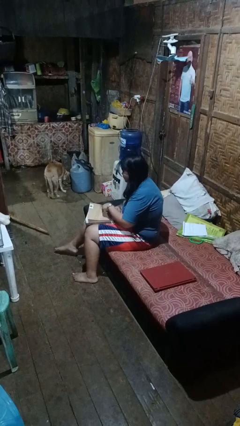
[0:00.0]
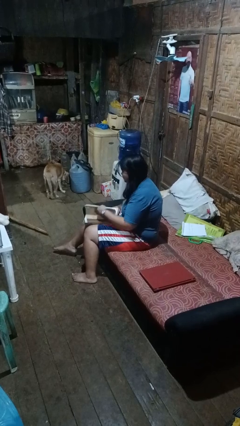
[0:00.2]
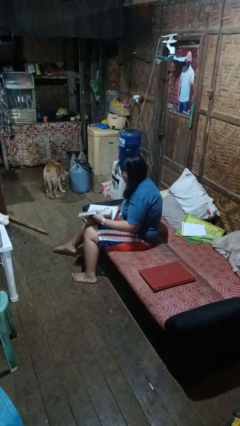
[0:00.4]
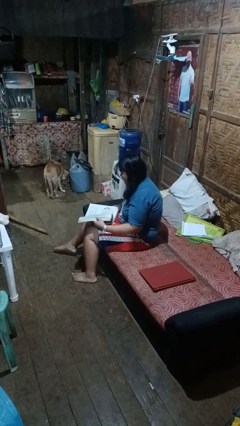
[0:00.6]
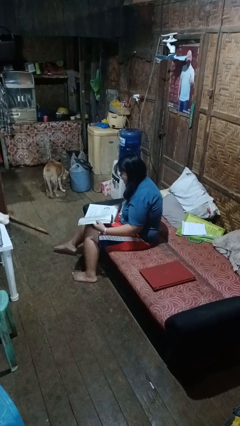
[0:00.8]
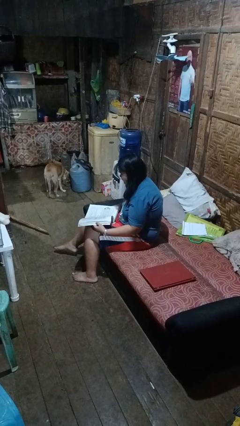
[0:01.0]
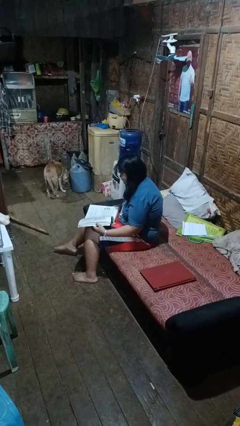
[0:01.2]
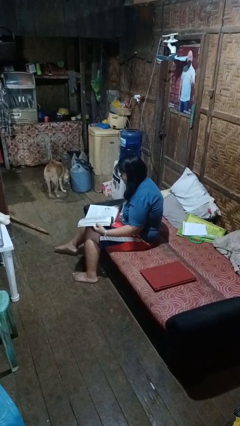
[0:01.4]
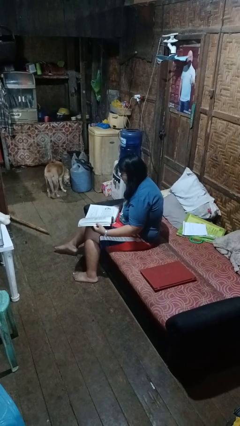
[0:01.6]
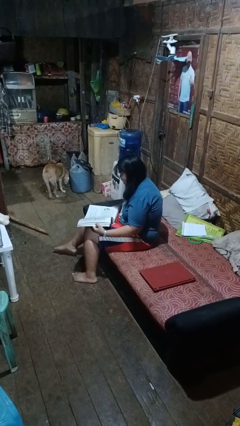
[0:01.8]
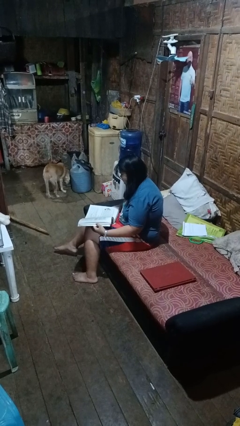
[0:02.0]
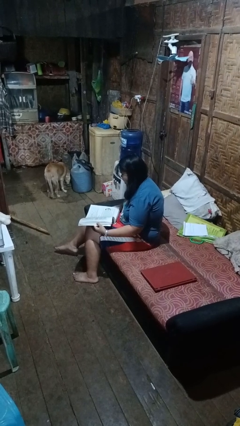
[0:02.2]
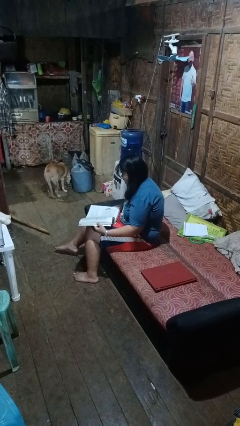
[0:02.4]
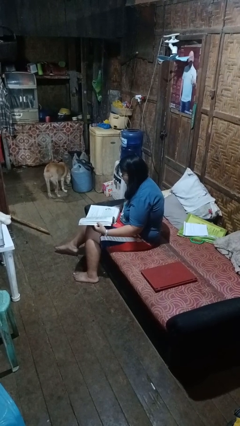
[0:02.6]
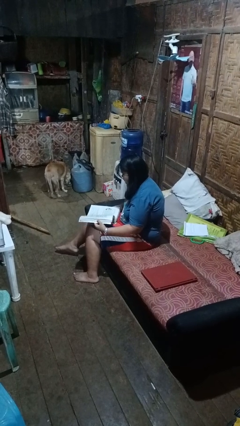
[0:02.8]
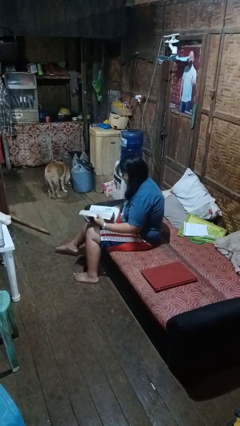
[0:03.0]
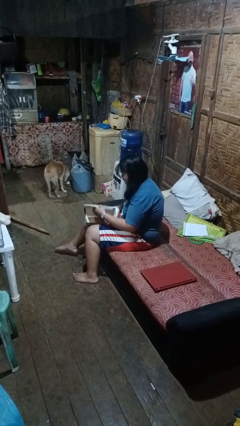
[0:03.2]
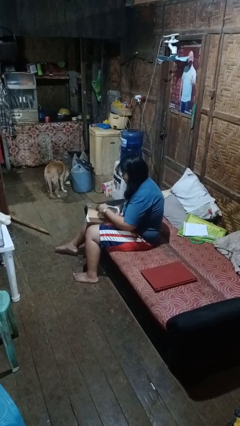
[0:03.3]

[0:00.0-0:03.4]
person reads book

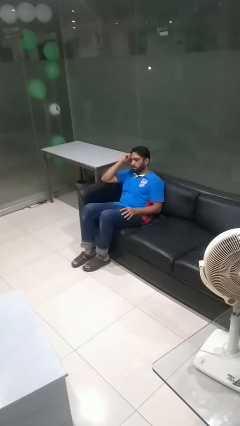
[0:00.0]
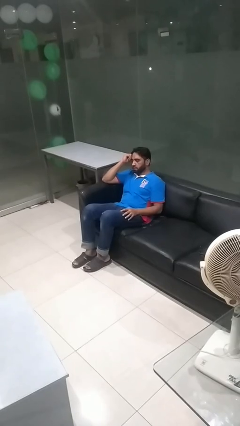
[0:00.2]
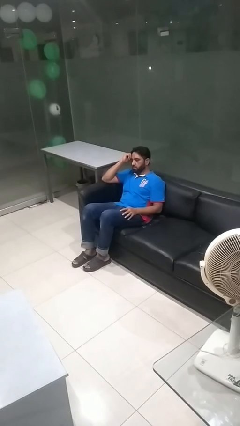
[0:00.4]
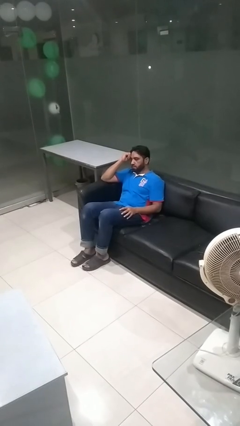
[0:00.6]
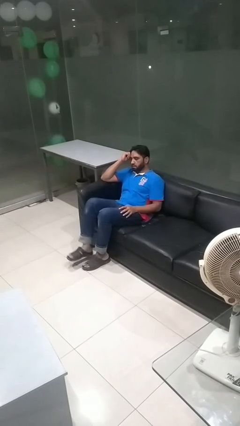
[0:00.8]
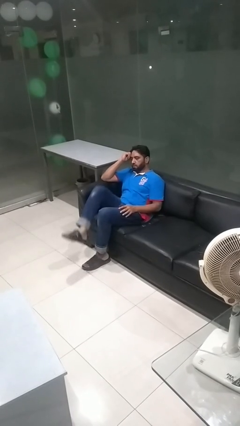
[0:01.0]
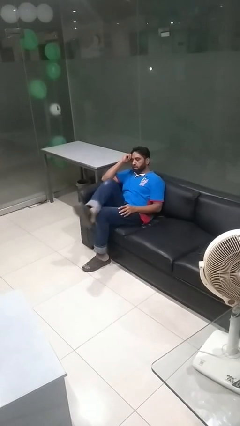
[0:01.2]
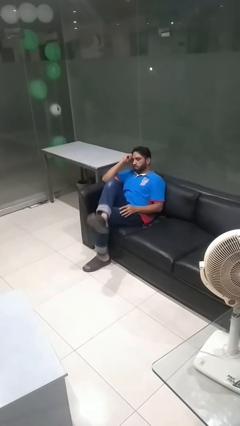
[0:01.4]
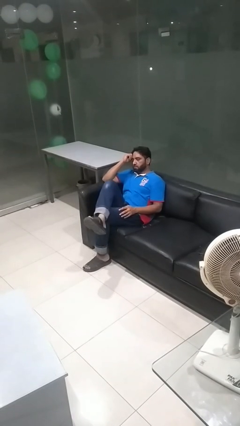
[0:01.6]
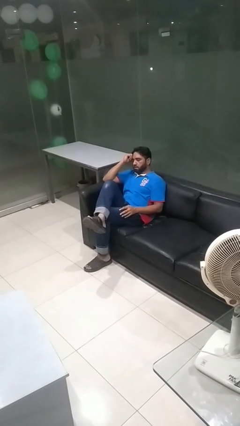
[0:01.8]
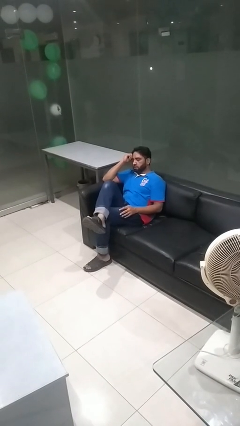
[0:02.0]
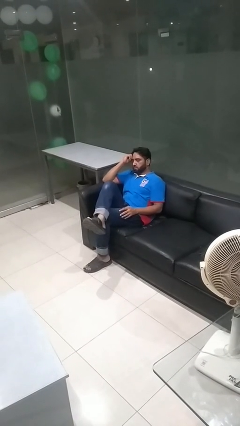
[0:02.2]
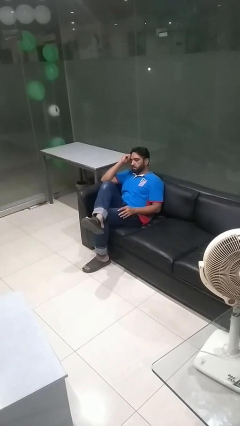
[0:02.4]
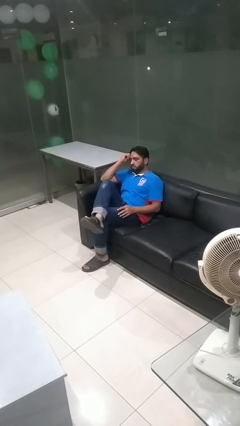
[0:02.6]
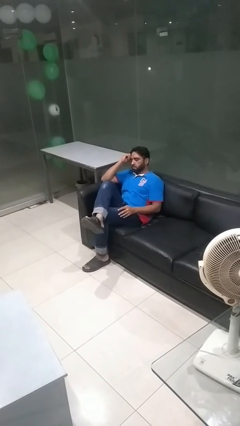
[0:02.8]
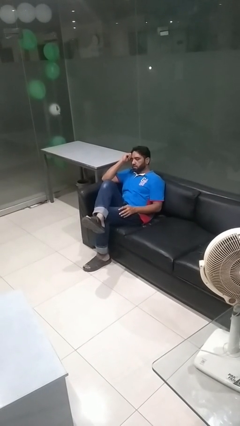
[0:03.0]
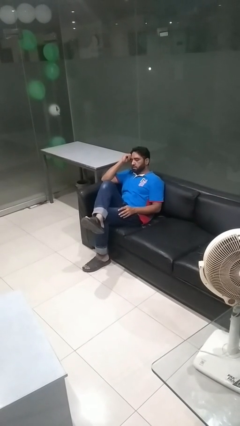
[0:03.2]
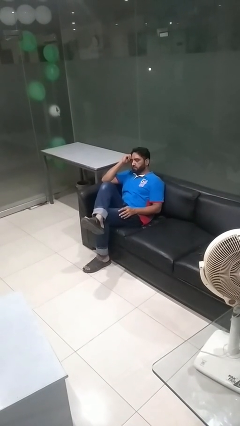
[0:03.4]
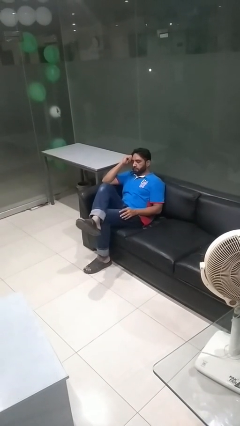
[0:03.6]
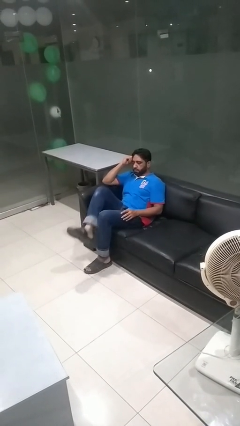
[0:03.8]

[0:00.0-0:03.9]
person crosses legs

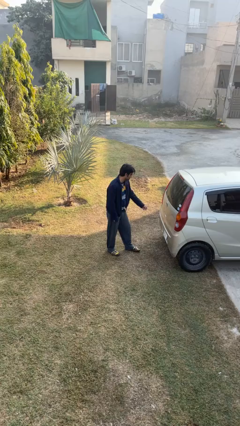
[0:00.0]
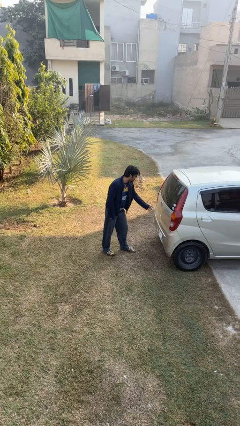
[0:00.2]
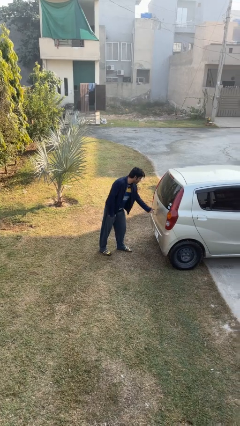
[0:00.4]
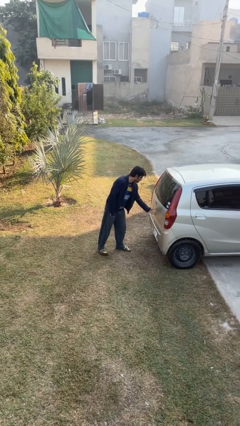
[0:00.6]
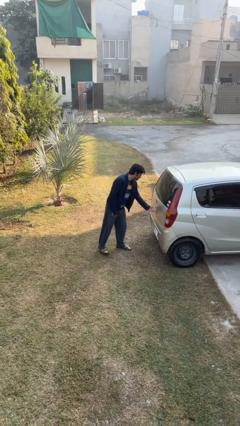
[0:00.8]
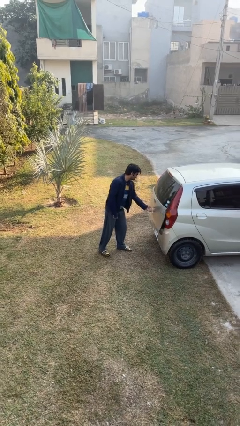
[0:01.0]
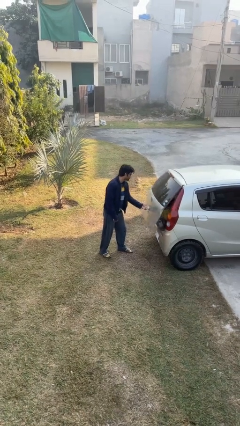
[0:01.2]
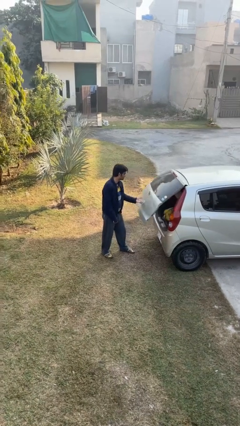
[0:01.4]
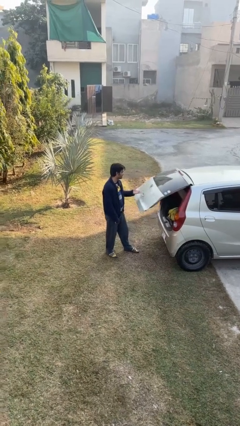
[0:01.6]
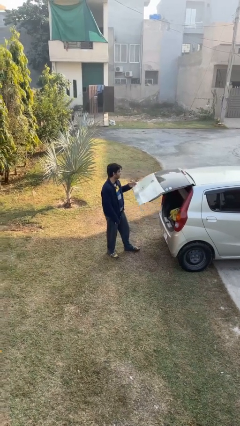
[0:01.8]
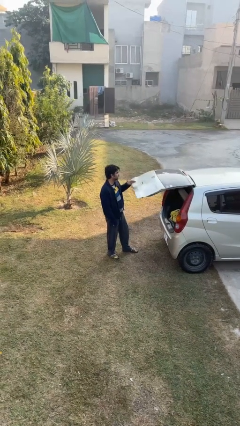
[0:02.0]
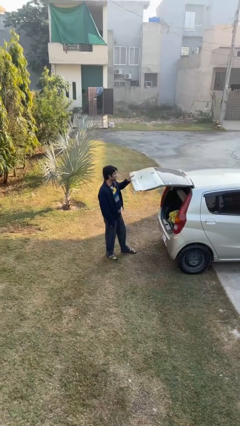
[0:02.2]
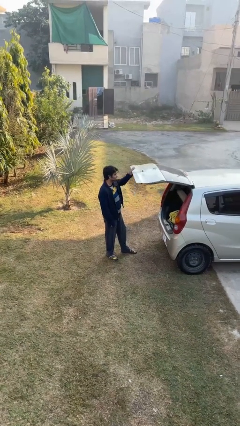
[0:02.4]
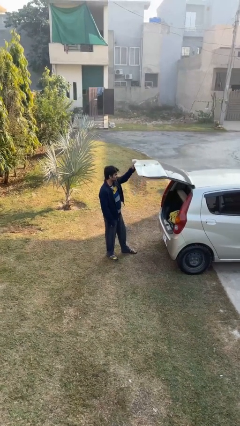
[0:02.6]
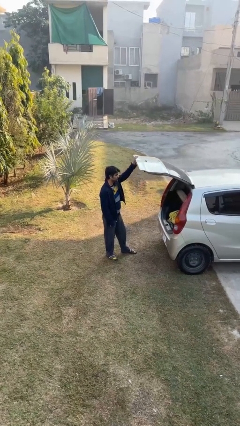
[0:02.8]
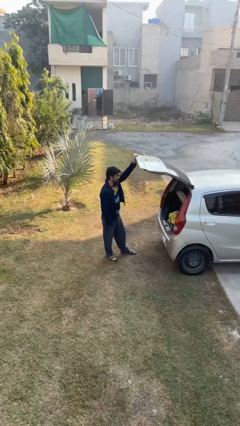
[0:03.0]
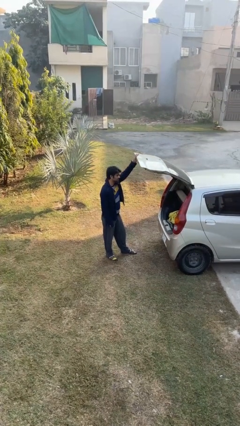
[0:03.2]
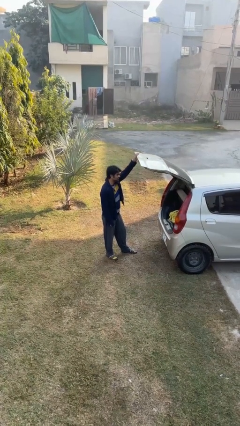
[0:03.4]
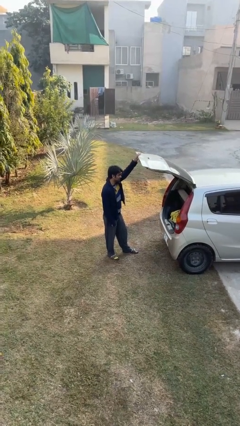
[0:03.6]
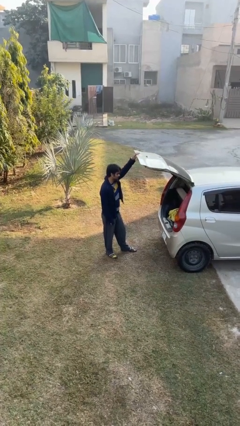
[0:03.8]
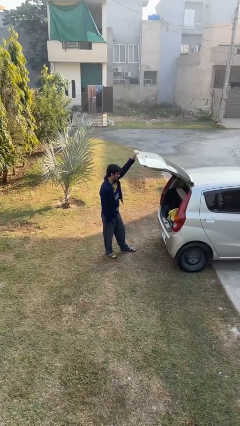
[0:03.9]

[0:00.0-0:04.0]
person opens car trunk

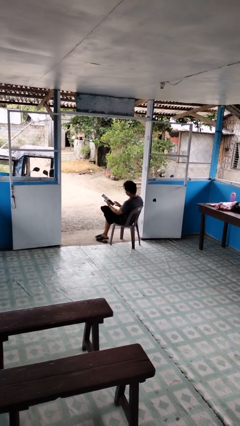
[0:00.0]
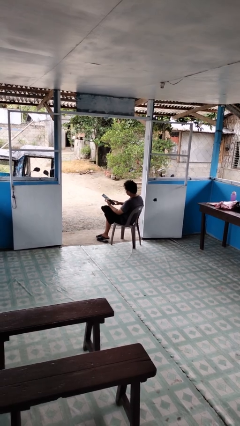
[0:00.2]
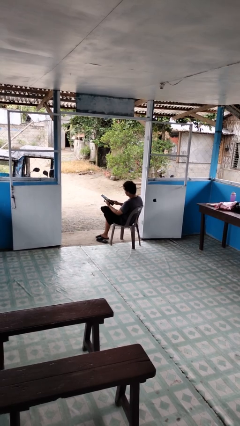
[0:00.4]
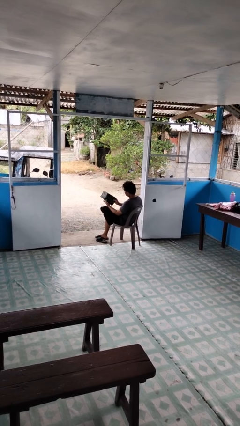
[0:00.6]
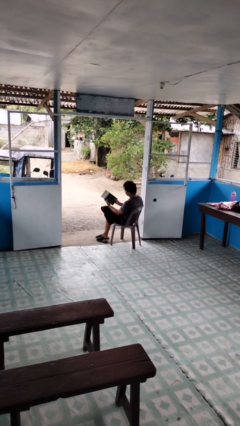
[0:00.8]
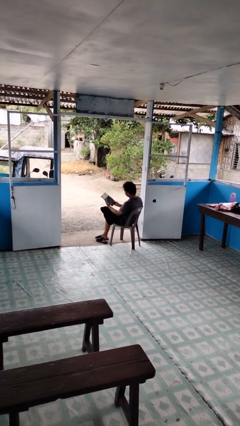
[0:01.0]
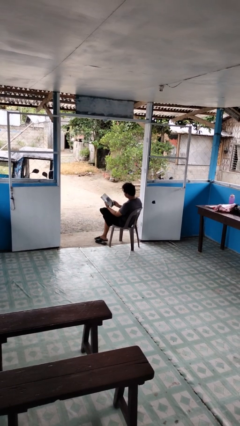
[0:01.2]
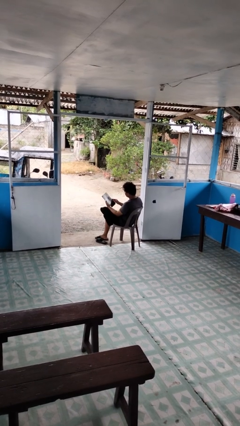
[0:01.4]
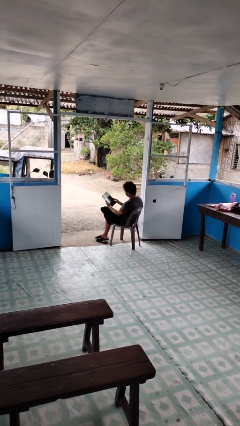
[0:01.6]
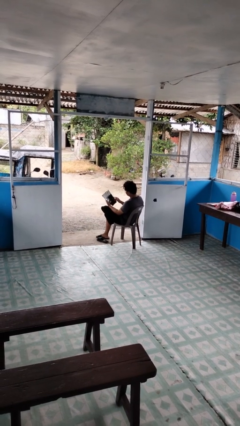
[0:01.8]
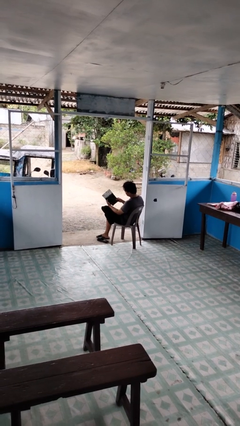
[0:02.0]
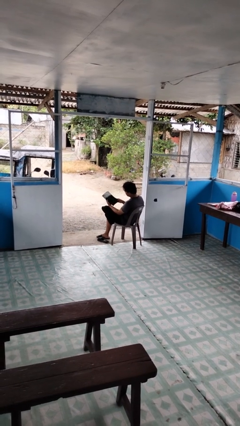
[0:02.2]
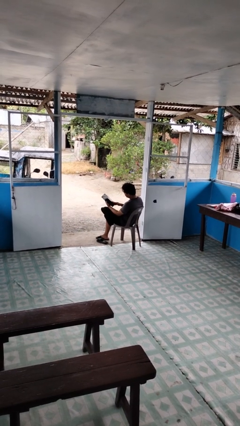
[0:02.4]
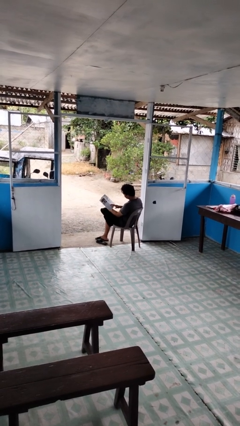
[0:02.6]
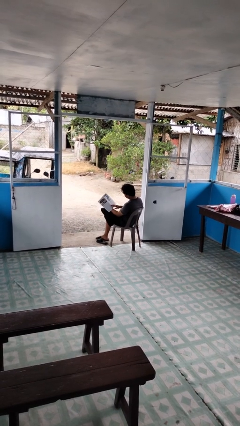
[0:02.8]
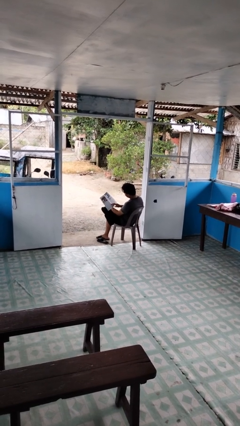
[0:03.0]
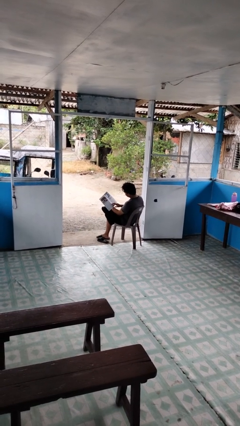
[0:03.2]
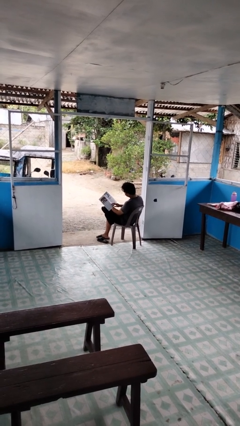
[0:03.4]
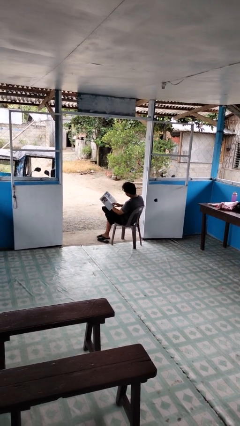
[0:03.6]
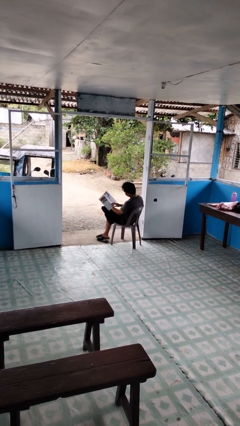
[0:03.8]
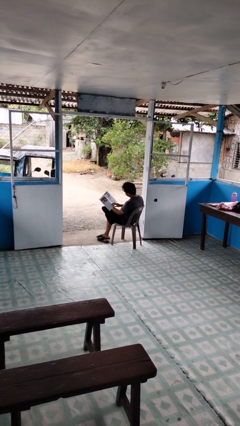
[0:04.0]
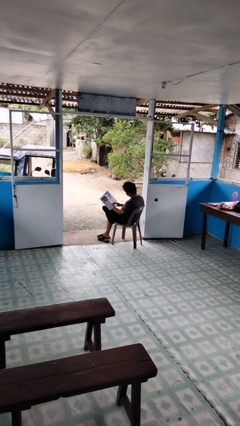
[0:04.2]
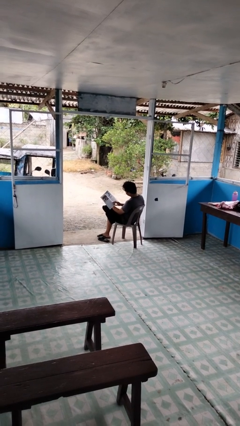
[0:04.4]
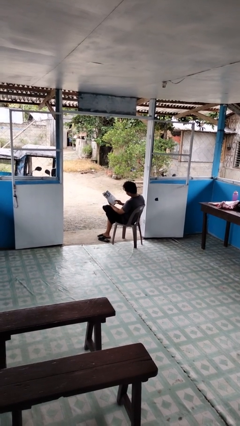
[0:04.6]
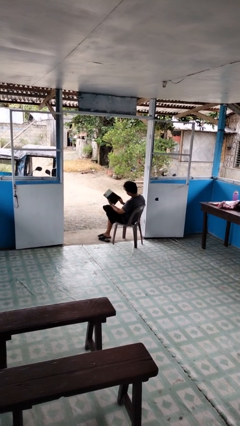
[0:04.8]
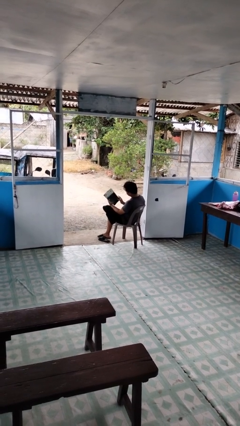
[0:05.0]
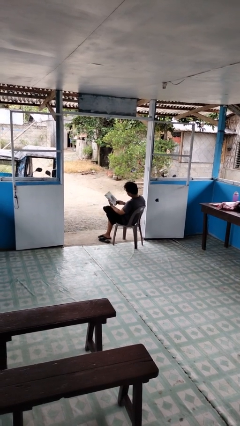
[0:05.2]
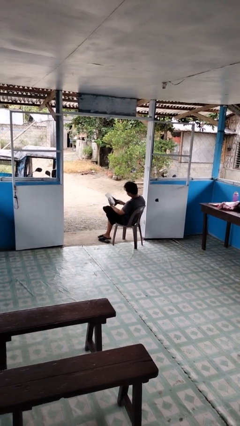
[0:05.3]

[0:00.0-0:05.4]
person reads magazine

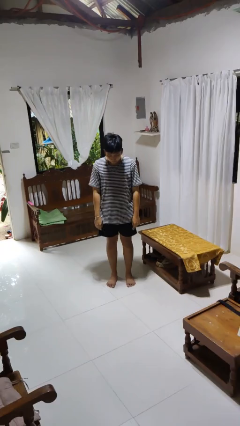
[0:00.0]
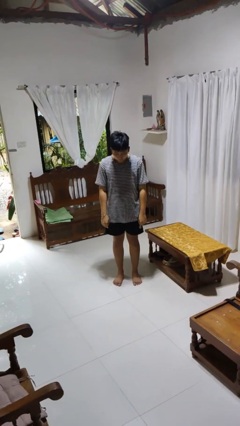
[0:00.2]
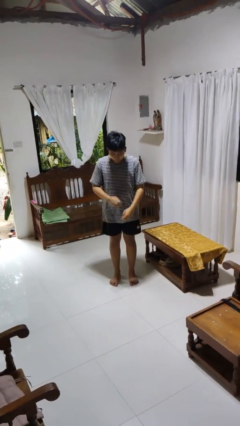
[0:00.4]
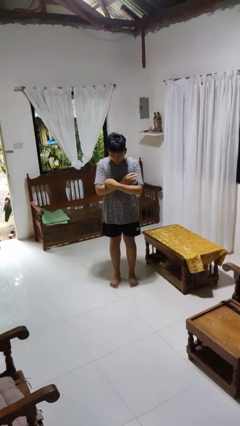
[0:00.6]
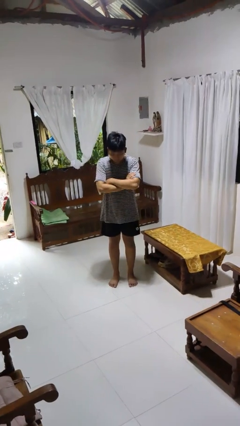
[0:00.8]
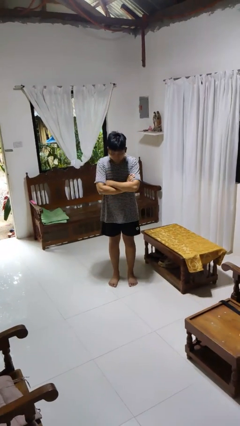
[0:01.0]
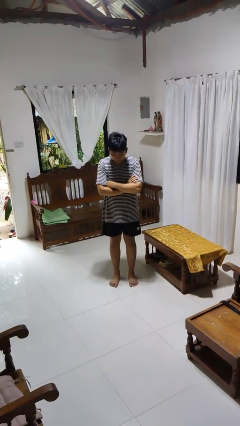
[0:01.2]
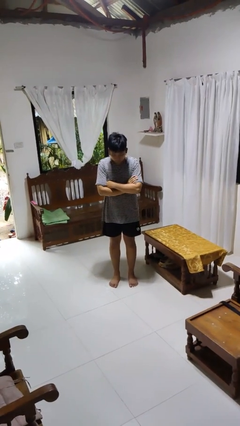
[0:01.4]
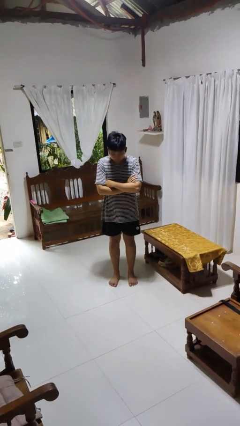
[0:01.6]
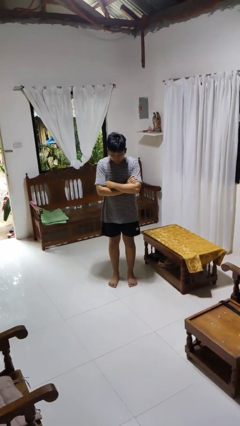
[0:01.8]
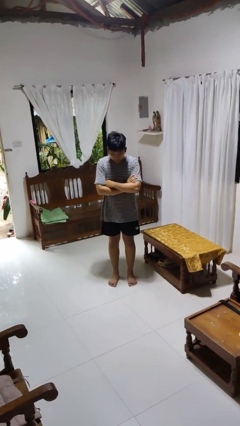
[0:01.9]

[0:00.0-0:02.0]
person gestures arms x
